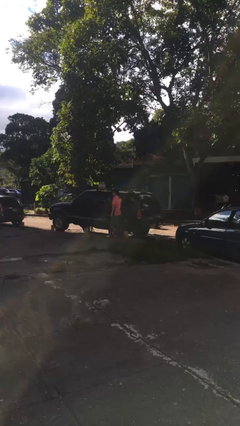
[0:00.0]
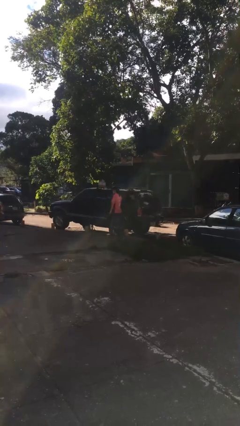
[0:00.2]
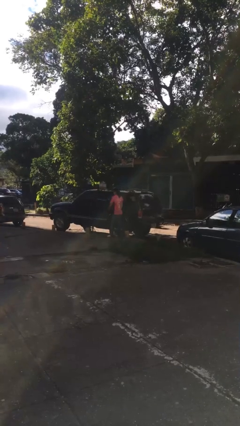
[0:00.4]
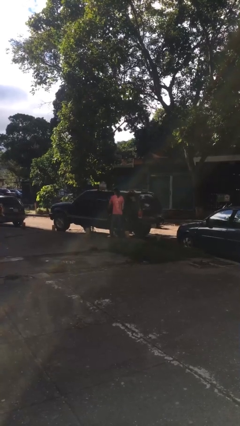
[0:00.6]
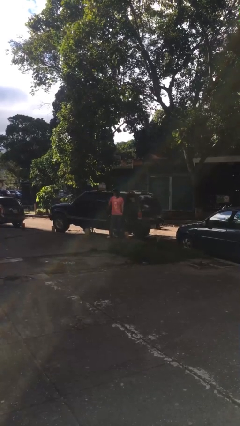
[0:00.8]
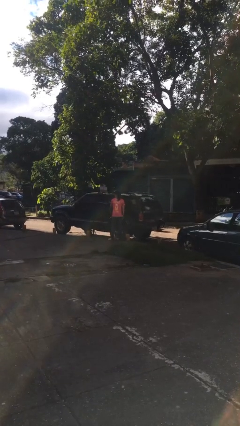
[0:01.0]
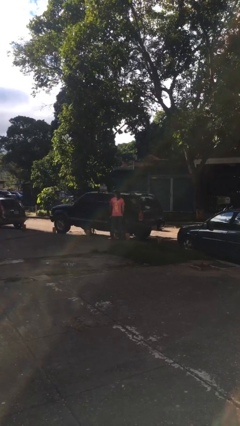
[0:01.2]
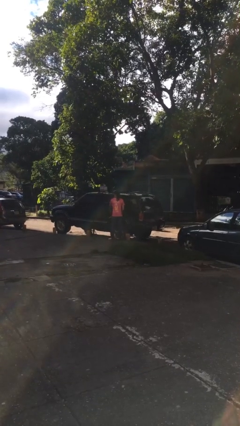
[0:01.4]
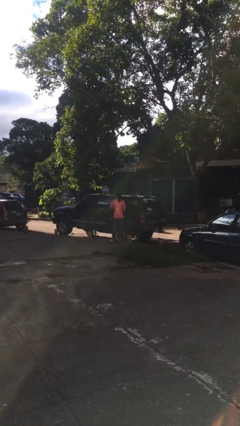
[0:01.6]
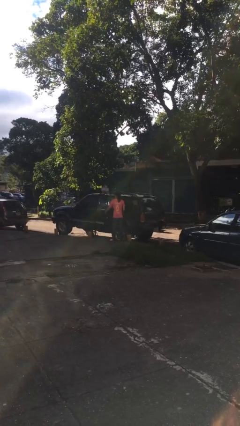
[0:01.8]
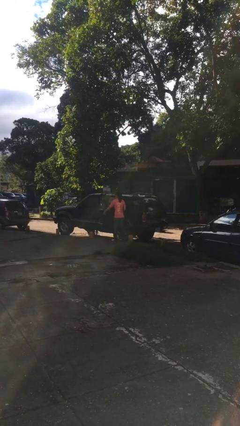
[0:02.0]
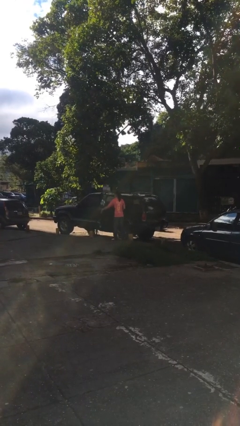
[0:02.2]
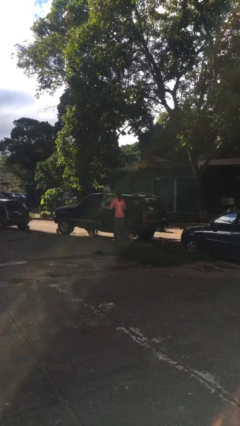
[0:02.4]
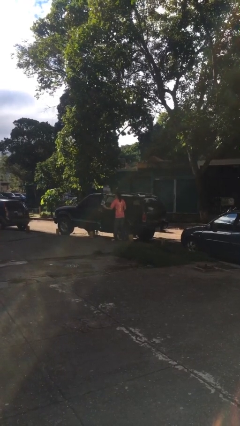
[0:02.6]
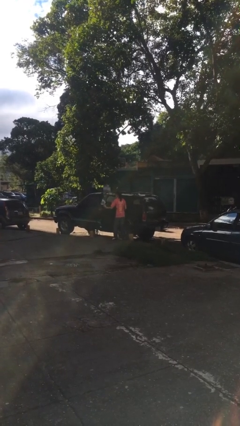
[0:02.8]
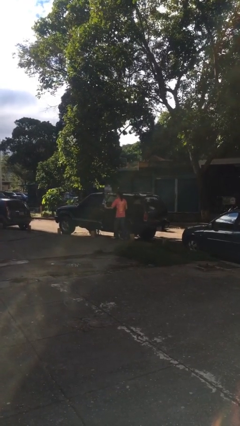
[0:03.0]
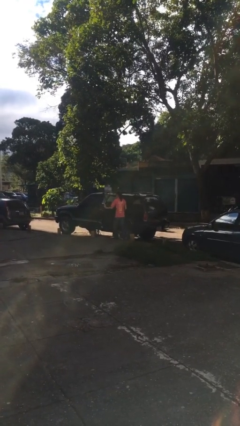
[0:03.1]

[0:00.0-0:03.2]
person opens car door

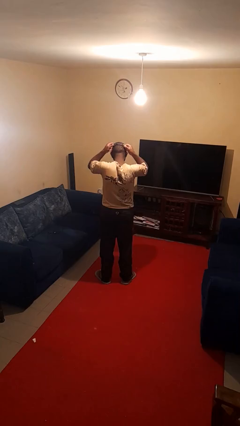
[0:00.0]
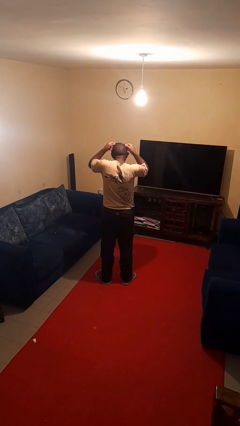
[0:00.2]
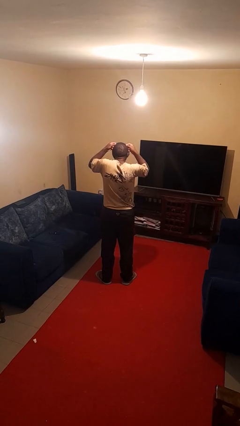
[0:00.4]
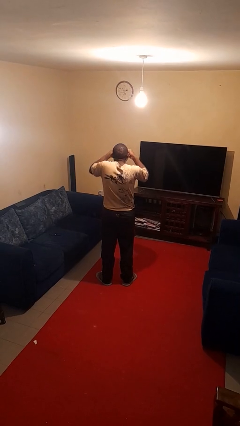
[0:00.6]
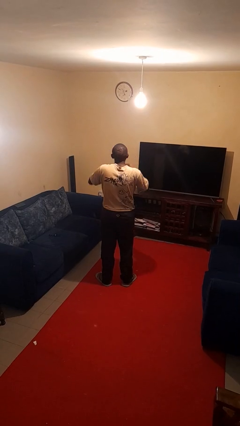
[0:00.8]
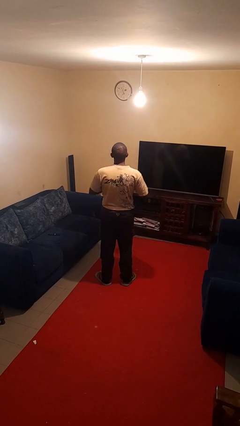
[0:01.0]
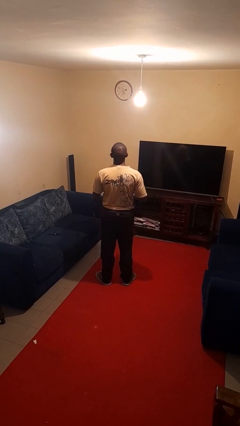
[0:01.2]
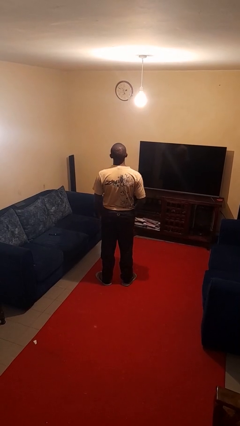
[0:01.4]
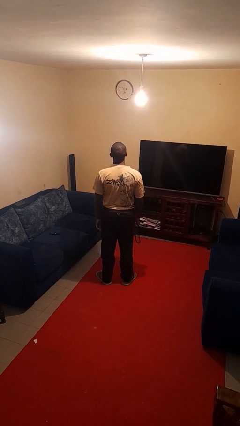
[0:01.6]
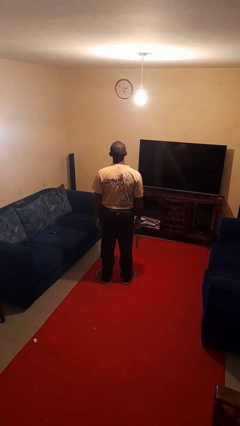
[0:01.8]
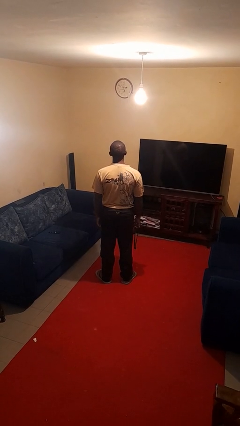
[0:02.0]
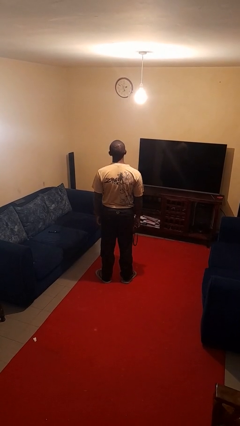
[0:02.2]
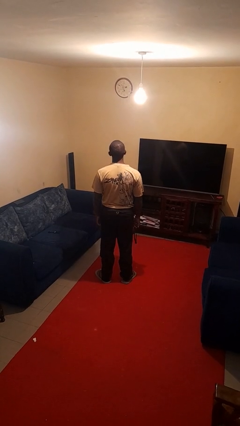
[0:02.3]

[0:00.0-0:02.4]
person takes off necklace

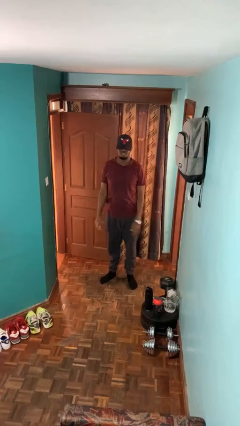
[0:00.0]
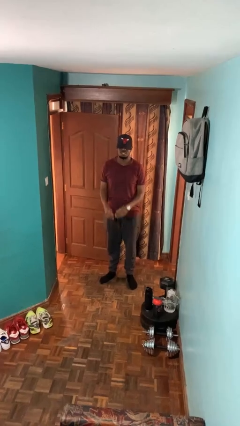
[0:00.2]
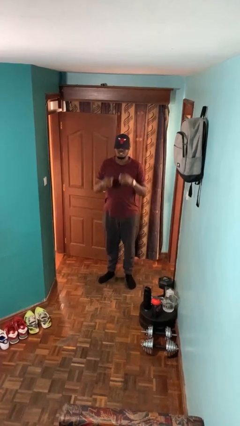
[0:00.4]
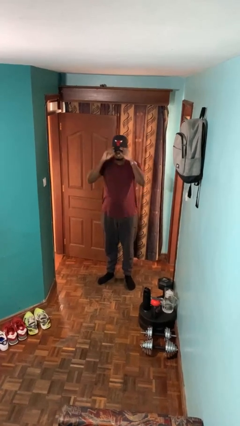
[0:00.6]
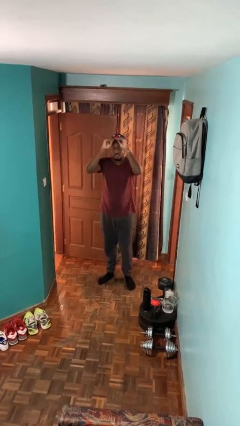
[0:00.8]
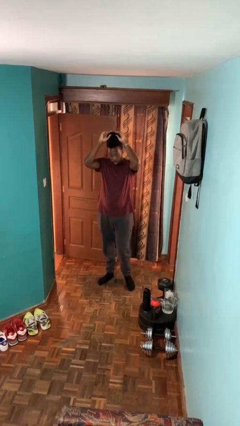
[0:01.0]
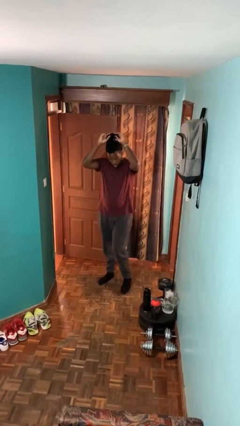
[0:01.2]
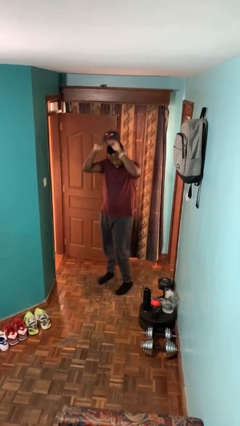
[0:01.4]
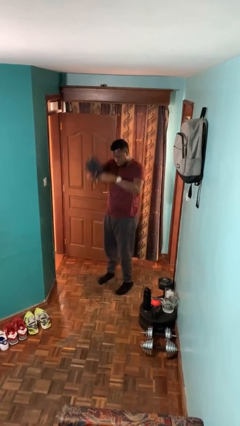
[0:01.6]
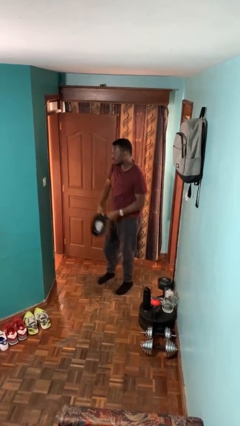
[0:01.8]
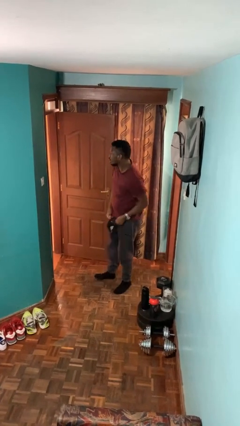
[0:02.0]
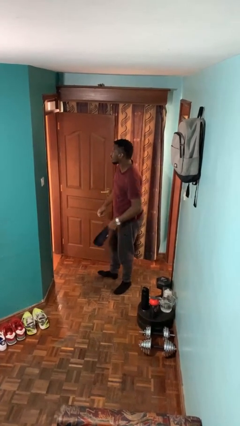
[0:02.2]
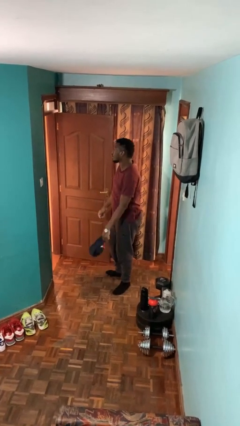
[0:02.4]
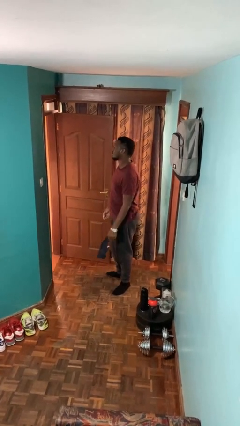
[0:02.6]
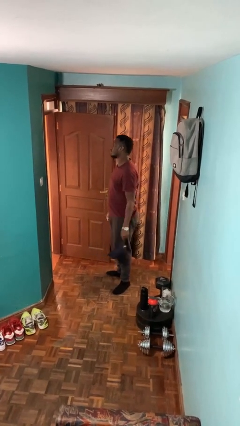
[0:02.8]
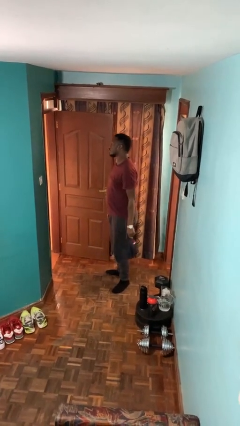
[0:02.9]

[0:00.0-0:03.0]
person takes off hat

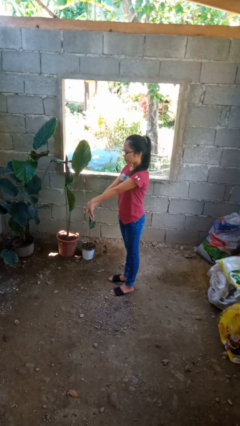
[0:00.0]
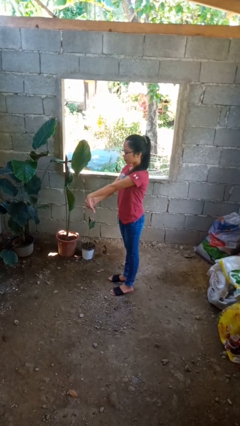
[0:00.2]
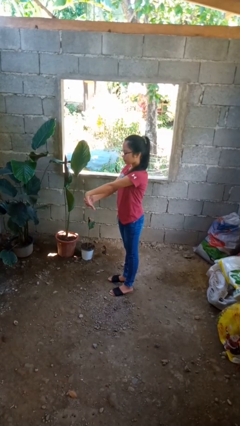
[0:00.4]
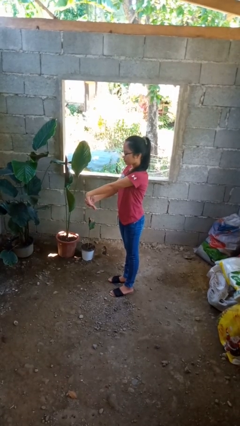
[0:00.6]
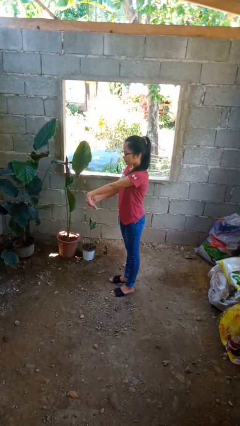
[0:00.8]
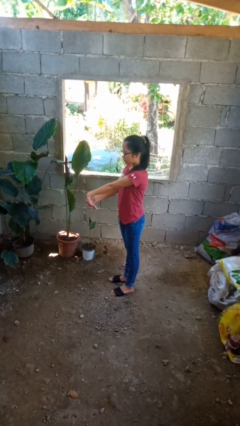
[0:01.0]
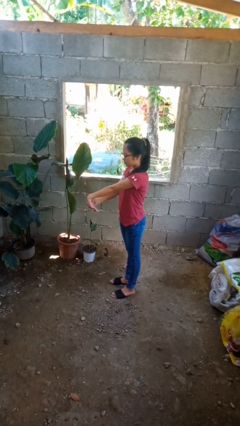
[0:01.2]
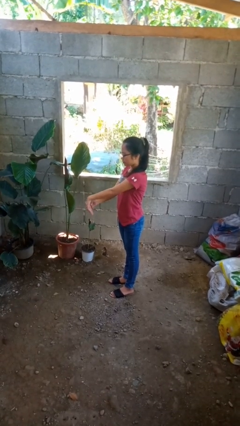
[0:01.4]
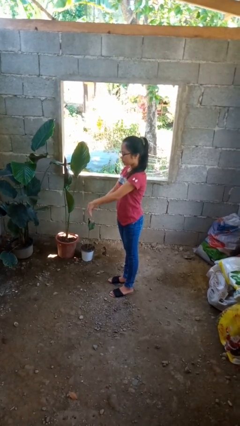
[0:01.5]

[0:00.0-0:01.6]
person cracks knuckles

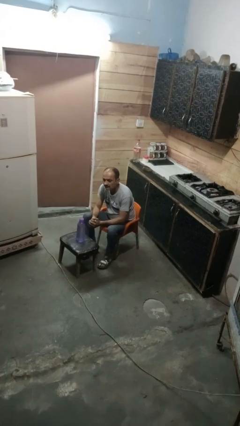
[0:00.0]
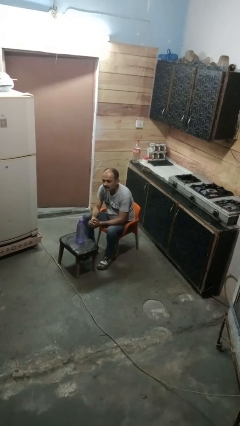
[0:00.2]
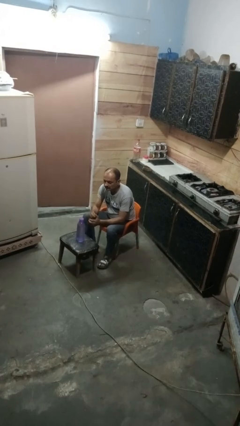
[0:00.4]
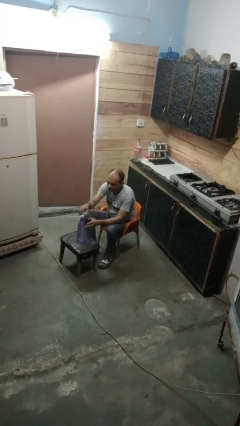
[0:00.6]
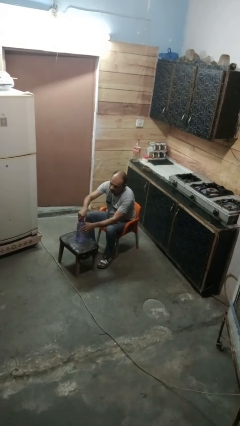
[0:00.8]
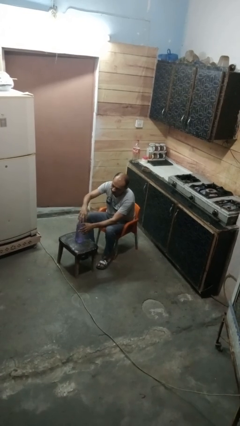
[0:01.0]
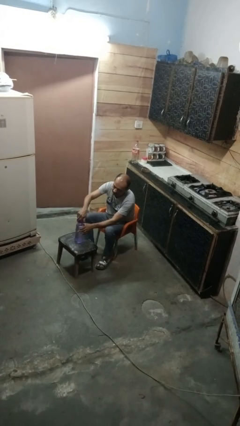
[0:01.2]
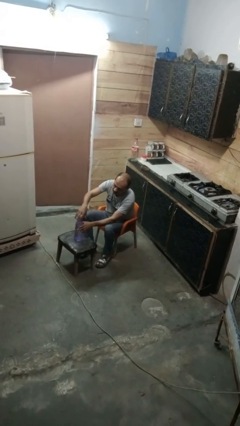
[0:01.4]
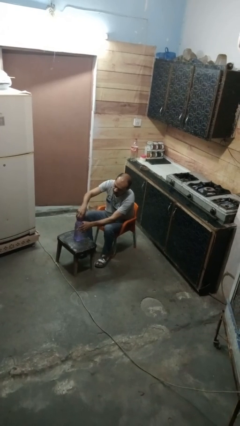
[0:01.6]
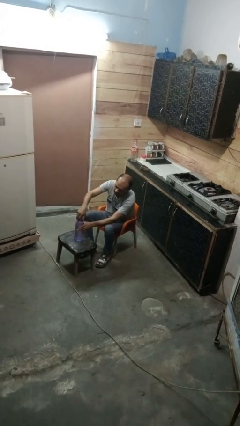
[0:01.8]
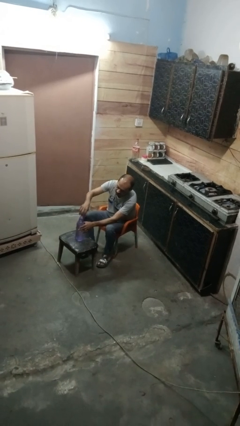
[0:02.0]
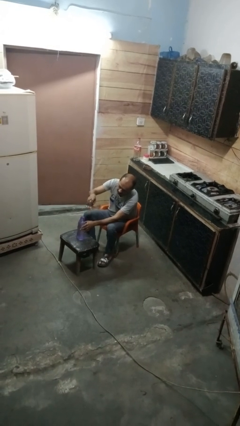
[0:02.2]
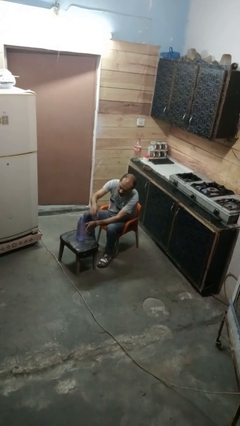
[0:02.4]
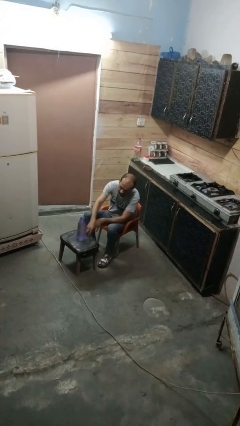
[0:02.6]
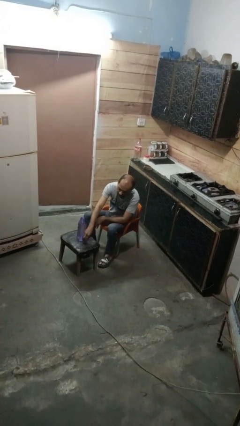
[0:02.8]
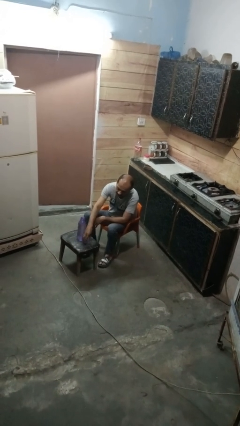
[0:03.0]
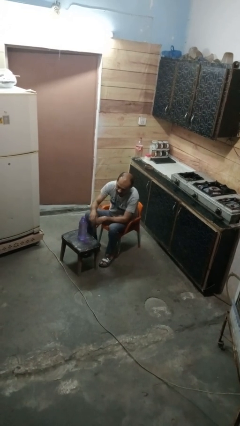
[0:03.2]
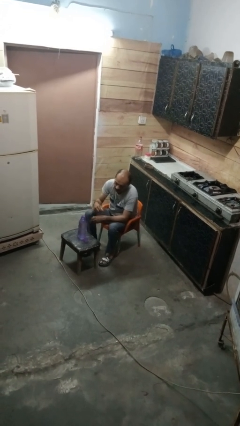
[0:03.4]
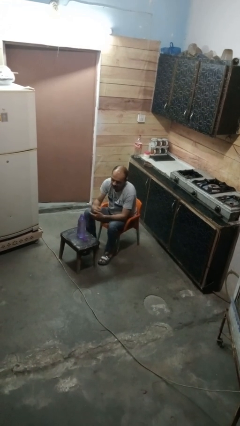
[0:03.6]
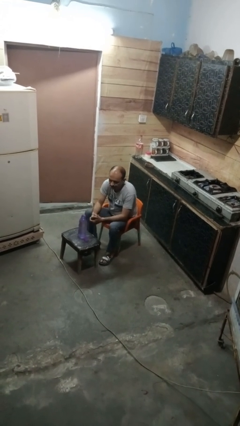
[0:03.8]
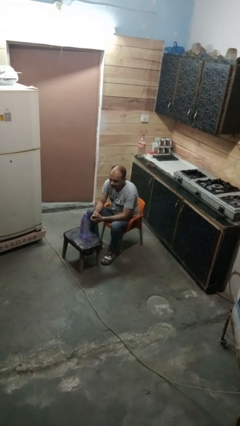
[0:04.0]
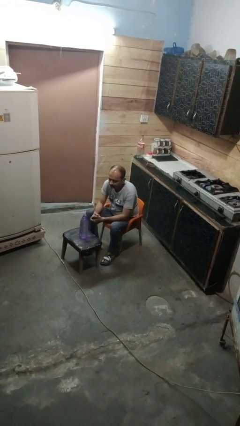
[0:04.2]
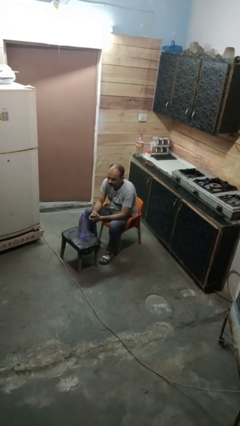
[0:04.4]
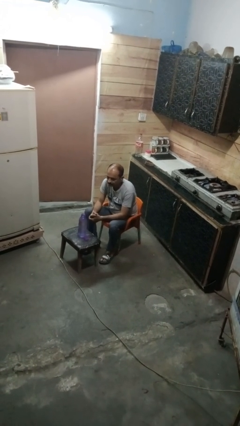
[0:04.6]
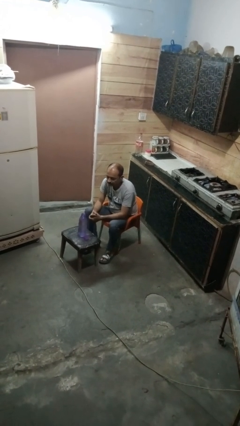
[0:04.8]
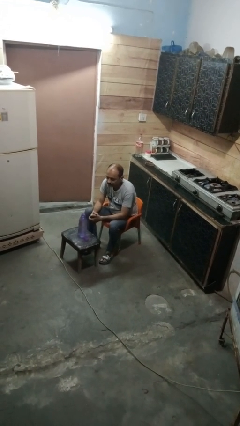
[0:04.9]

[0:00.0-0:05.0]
person unscrews lid from bottle

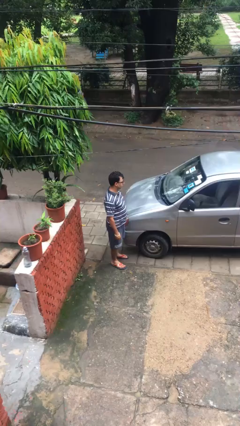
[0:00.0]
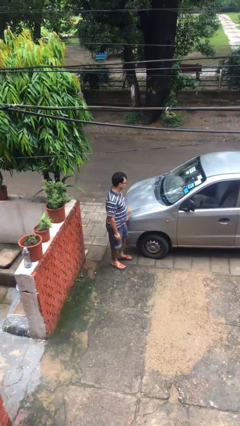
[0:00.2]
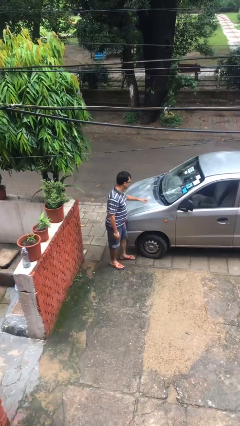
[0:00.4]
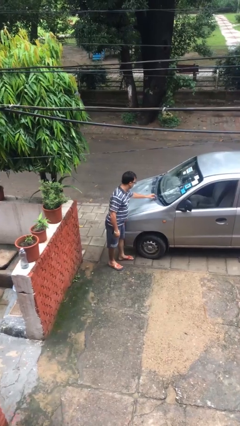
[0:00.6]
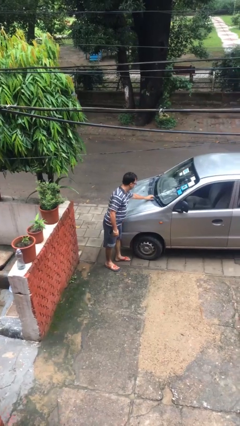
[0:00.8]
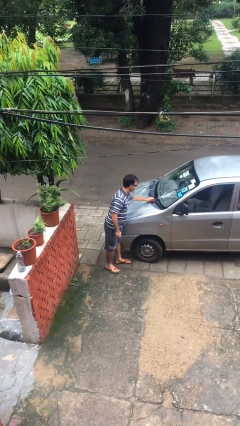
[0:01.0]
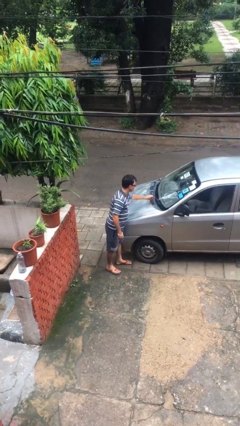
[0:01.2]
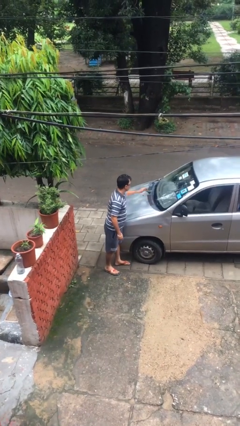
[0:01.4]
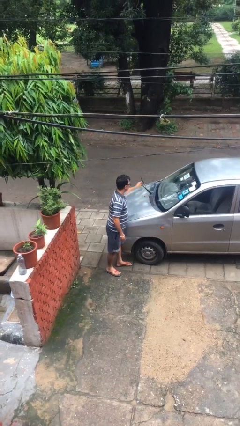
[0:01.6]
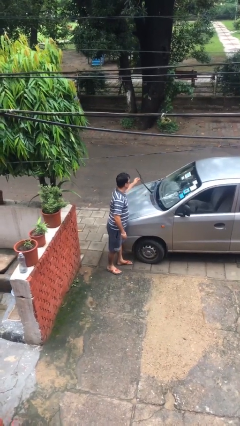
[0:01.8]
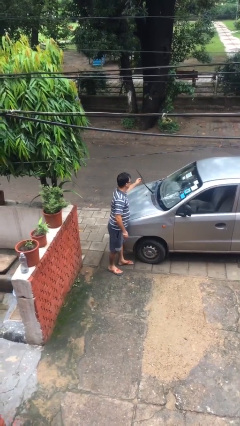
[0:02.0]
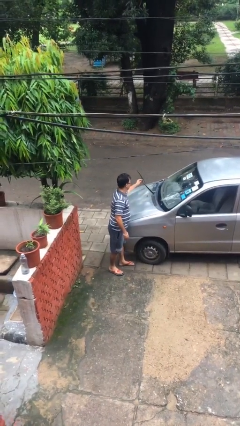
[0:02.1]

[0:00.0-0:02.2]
person flips up car wipers

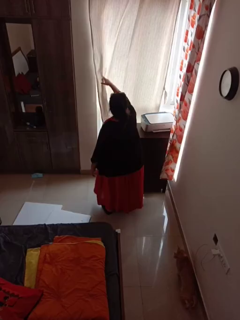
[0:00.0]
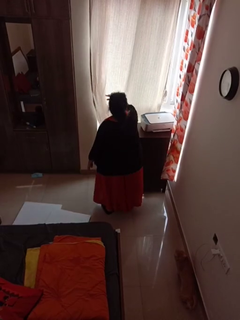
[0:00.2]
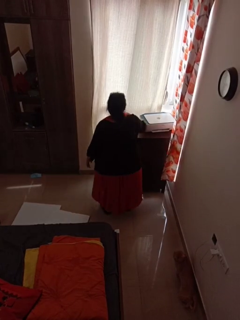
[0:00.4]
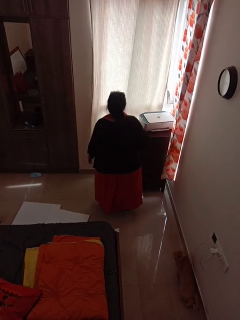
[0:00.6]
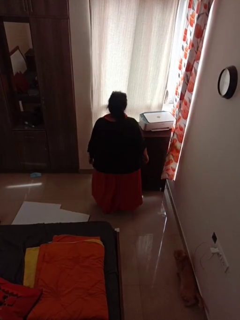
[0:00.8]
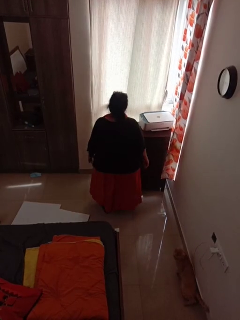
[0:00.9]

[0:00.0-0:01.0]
person closes curtains
